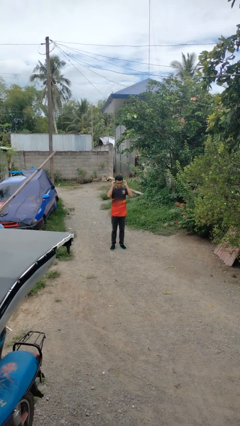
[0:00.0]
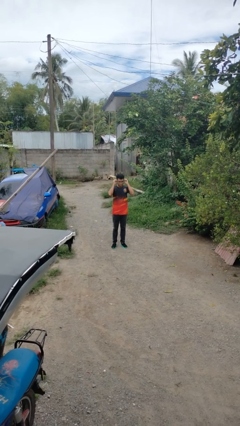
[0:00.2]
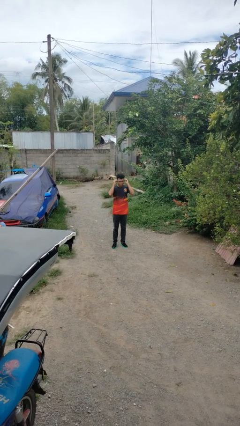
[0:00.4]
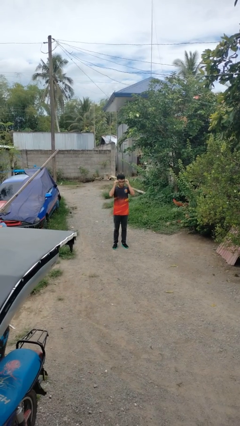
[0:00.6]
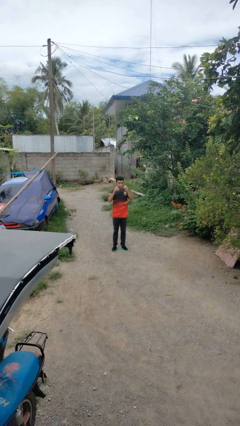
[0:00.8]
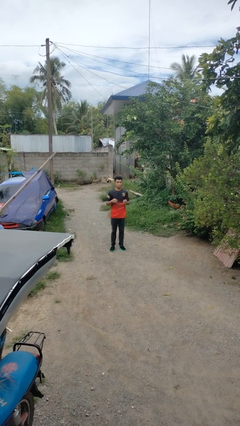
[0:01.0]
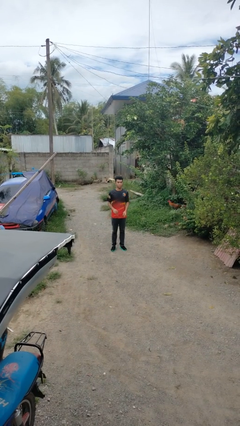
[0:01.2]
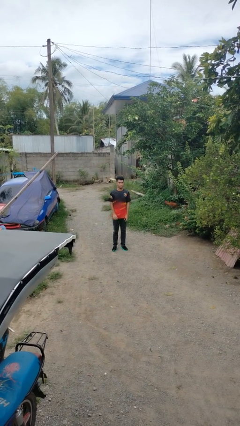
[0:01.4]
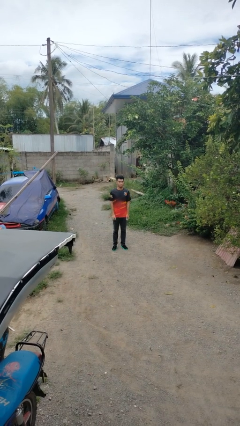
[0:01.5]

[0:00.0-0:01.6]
person takes off glasses

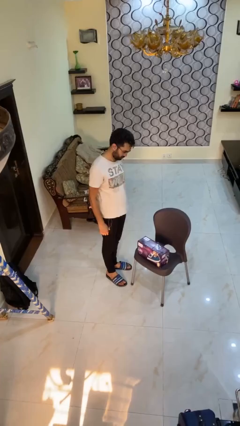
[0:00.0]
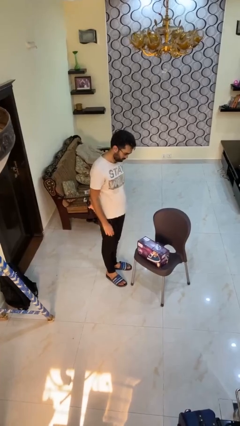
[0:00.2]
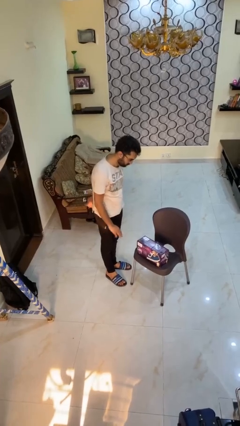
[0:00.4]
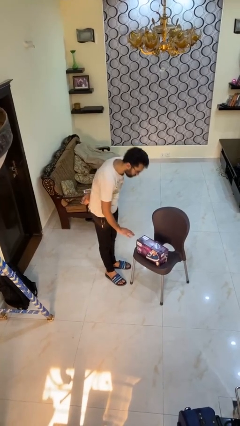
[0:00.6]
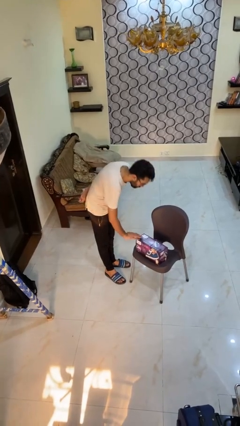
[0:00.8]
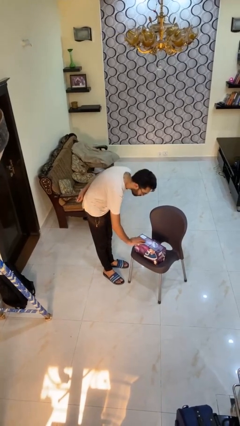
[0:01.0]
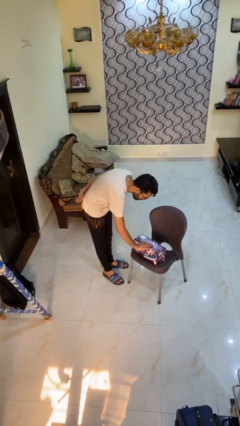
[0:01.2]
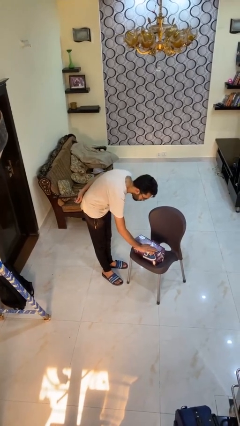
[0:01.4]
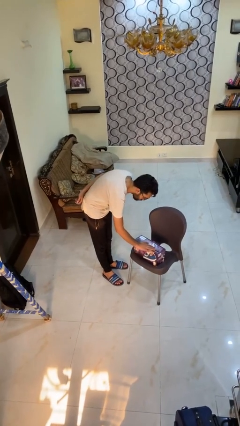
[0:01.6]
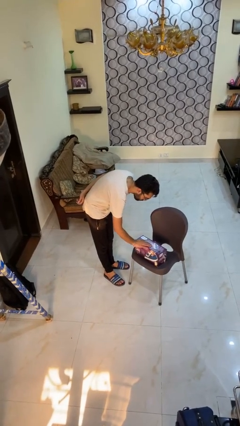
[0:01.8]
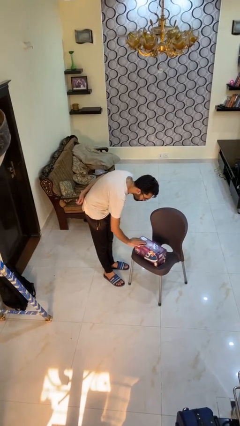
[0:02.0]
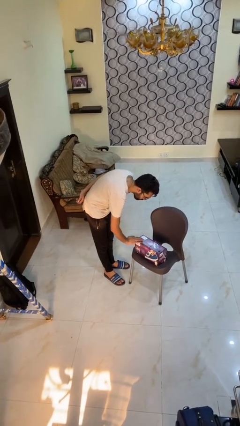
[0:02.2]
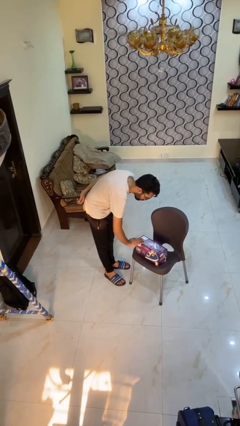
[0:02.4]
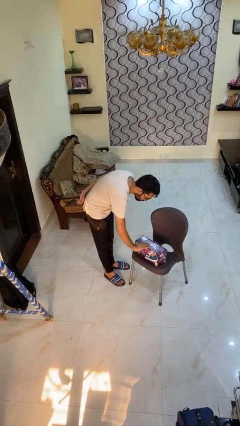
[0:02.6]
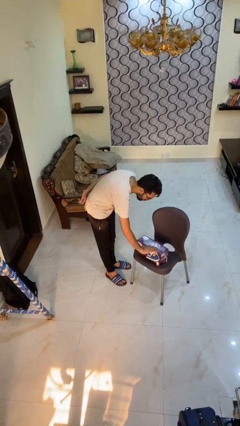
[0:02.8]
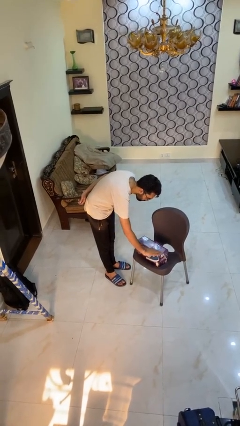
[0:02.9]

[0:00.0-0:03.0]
person waves hand over object

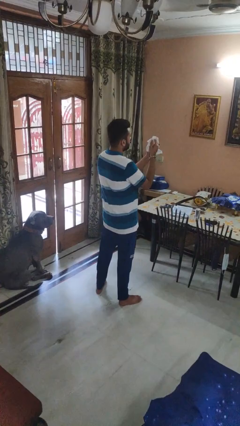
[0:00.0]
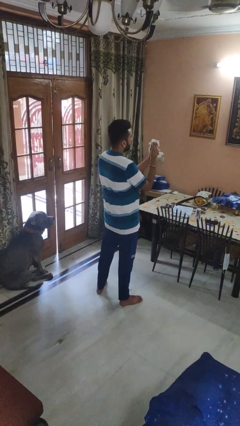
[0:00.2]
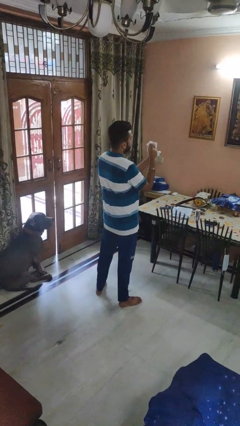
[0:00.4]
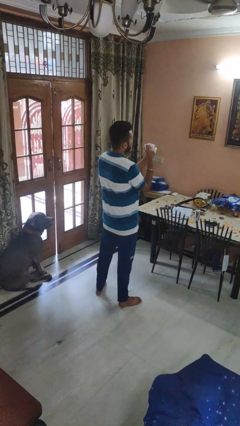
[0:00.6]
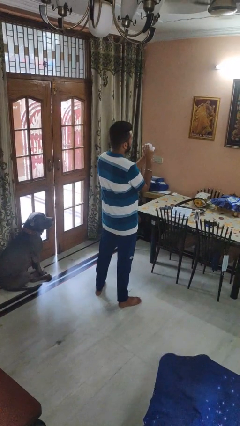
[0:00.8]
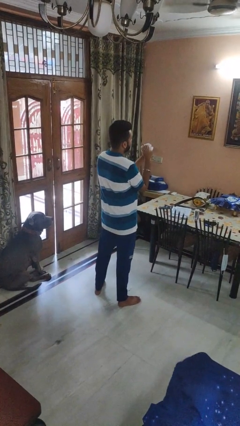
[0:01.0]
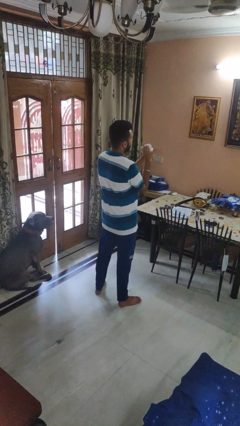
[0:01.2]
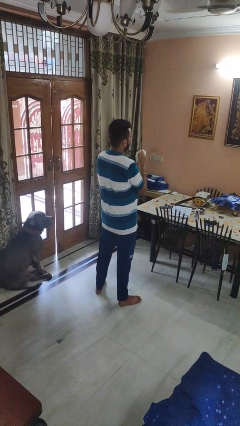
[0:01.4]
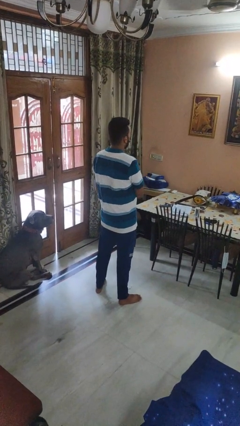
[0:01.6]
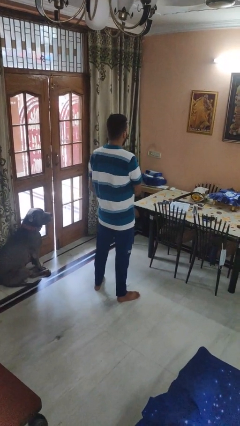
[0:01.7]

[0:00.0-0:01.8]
person crumples paper

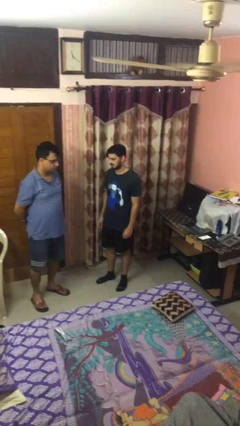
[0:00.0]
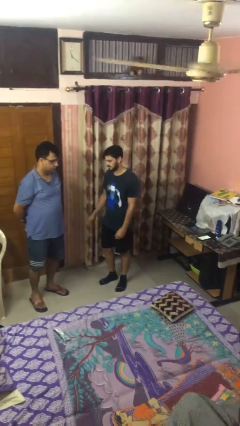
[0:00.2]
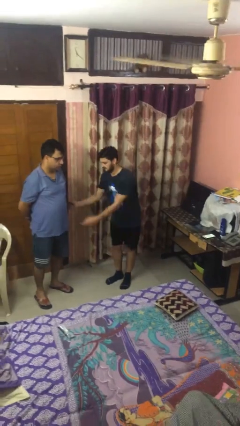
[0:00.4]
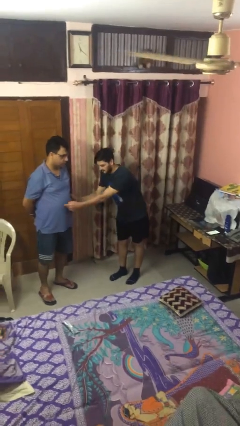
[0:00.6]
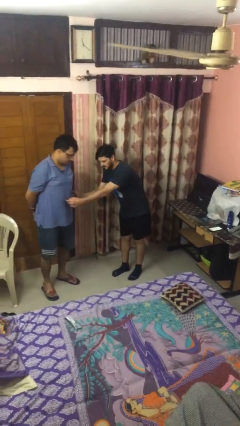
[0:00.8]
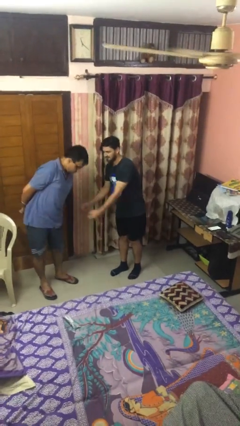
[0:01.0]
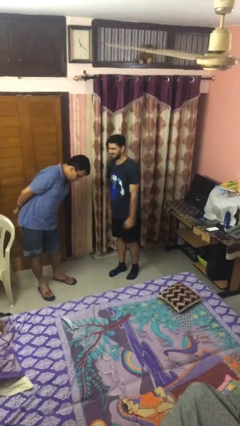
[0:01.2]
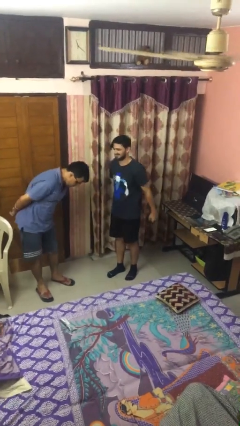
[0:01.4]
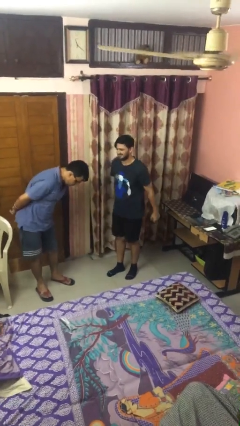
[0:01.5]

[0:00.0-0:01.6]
person tickles person

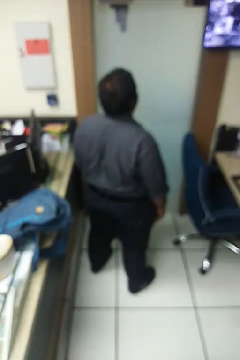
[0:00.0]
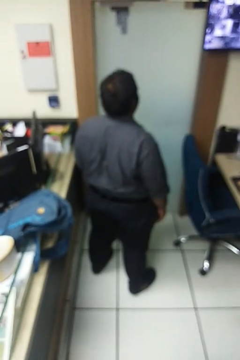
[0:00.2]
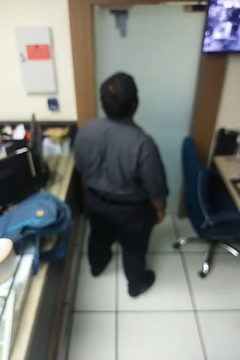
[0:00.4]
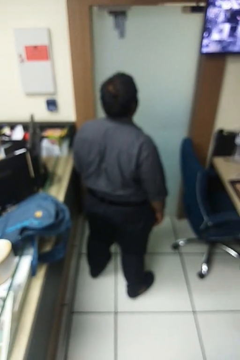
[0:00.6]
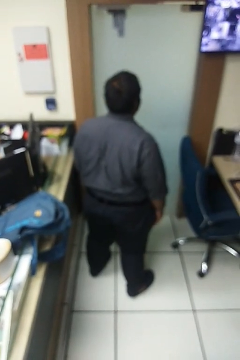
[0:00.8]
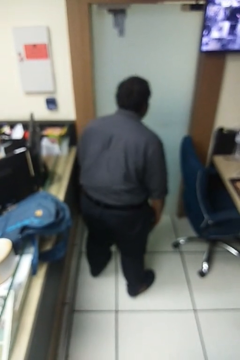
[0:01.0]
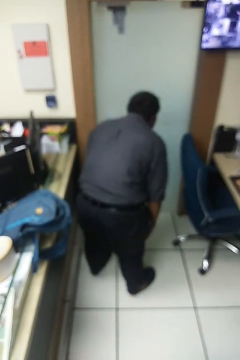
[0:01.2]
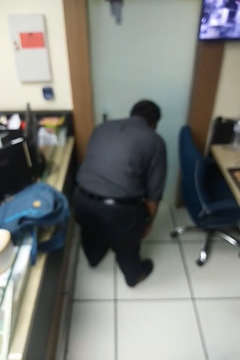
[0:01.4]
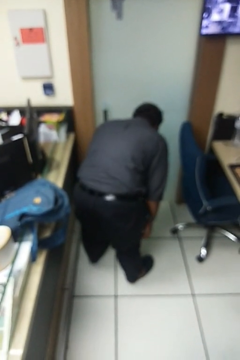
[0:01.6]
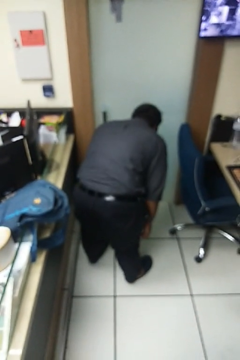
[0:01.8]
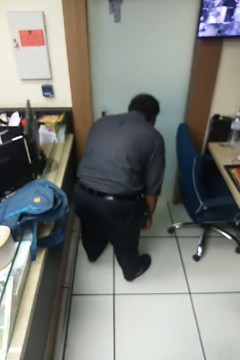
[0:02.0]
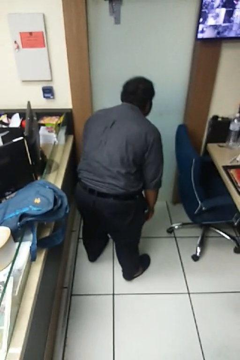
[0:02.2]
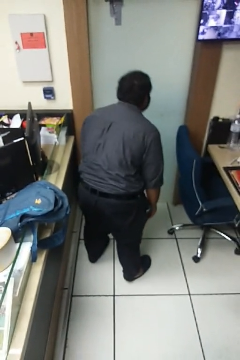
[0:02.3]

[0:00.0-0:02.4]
person bows

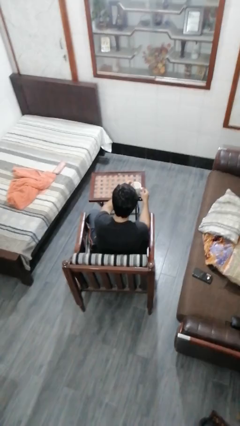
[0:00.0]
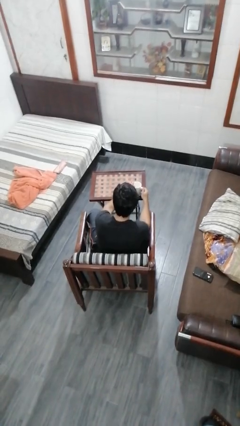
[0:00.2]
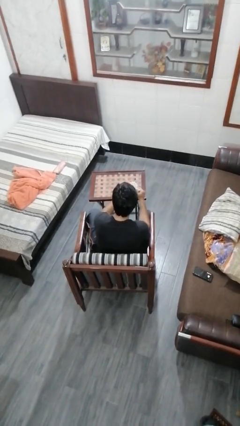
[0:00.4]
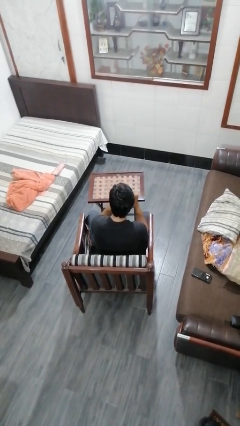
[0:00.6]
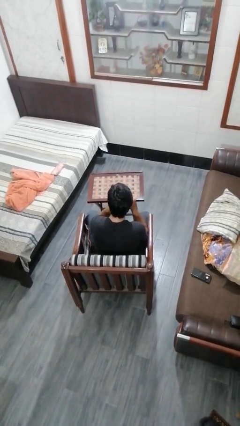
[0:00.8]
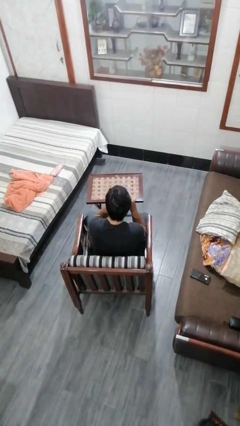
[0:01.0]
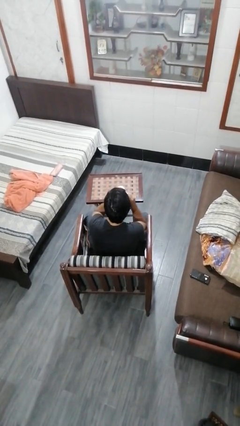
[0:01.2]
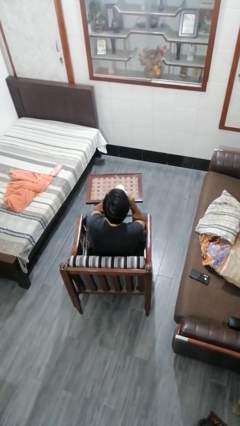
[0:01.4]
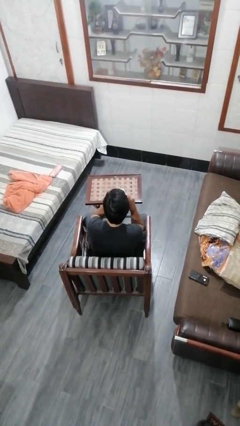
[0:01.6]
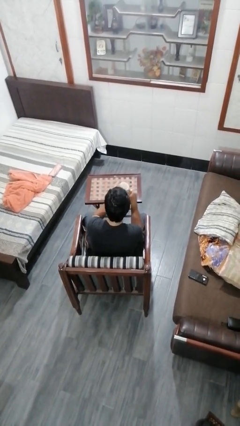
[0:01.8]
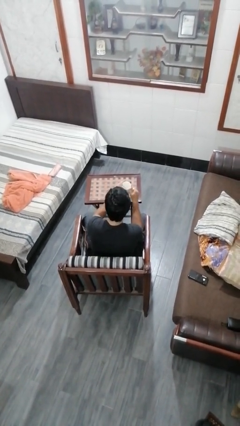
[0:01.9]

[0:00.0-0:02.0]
person drinks from mug

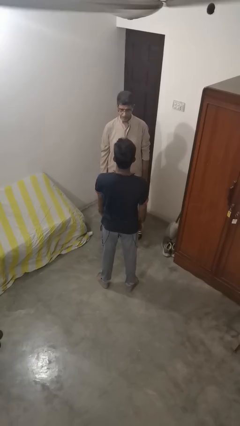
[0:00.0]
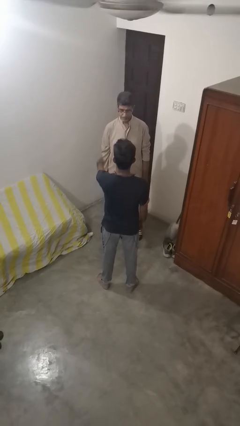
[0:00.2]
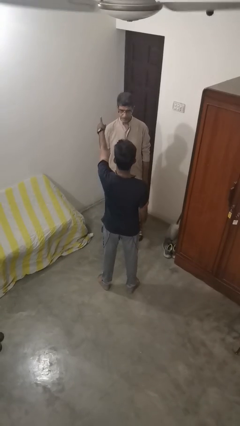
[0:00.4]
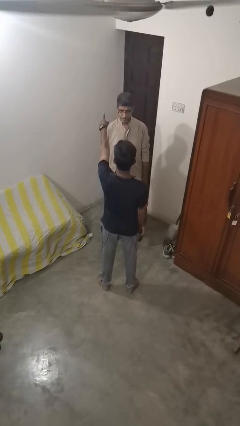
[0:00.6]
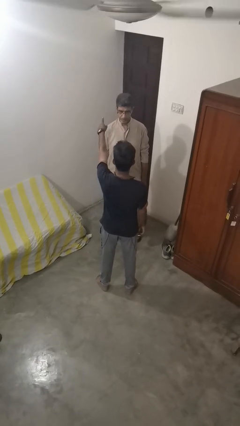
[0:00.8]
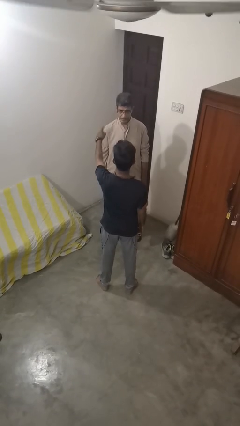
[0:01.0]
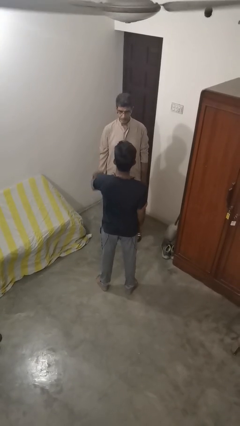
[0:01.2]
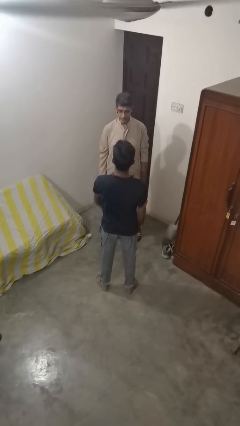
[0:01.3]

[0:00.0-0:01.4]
person shoves person

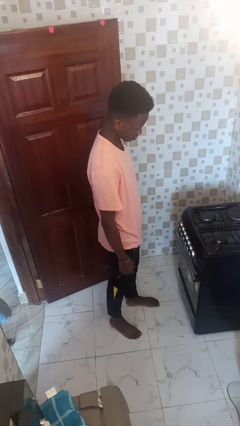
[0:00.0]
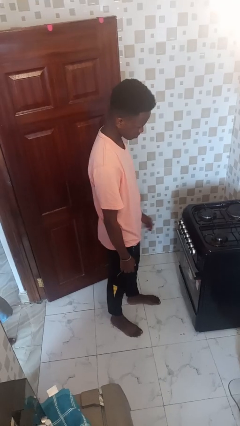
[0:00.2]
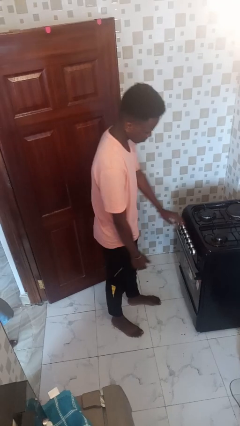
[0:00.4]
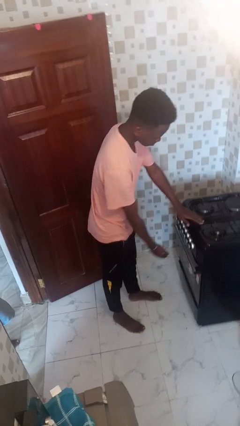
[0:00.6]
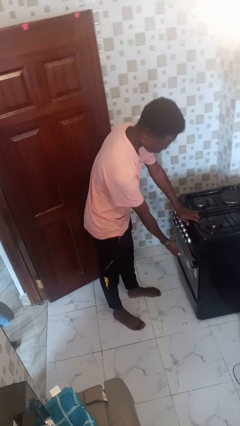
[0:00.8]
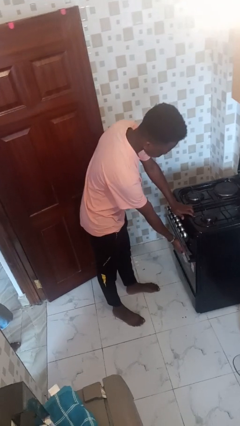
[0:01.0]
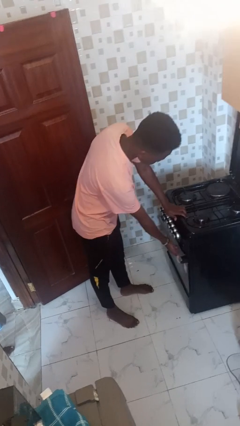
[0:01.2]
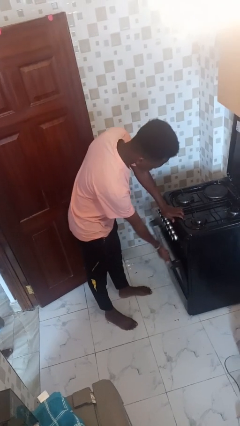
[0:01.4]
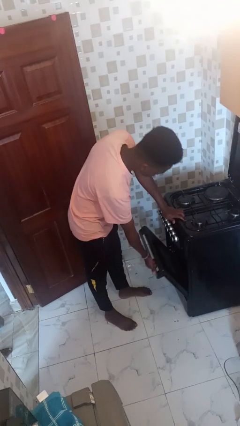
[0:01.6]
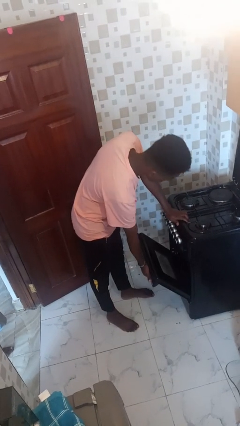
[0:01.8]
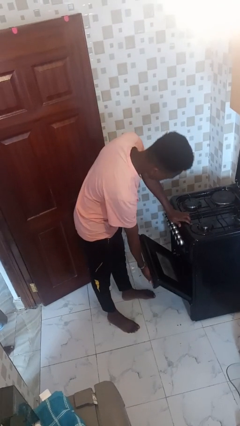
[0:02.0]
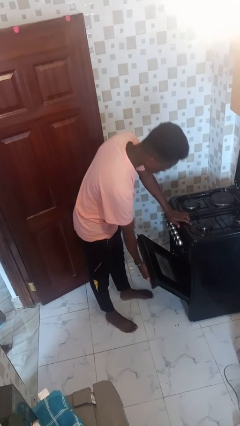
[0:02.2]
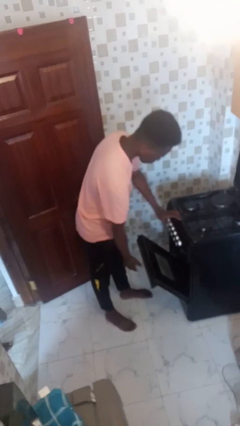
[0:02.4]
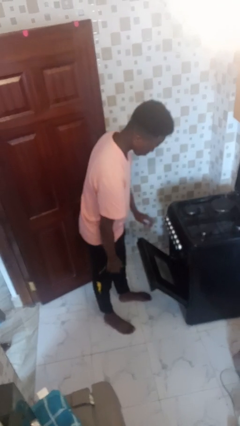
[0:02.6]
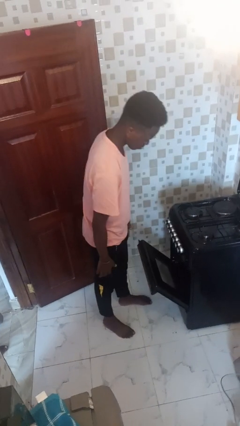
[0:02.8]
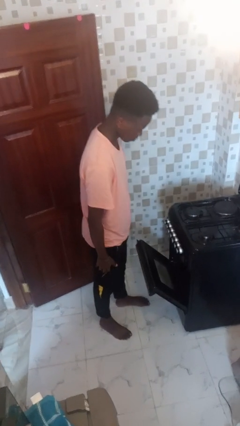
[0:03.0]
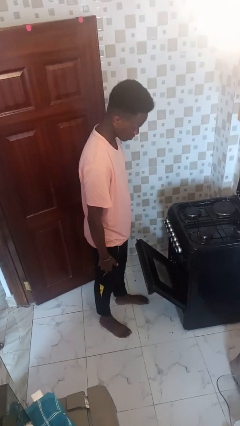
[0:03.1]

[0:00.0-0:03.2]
person opens oven door
